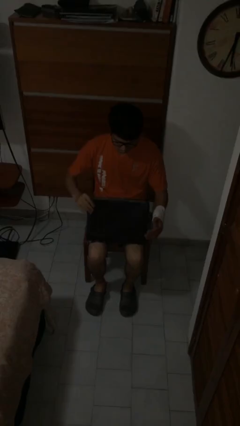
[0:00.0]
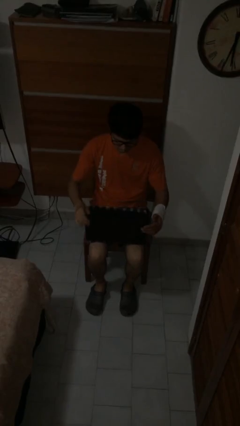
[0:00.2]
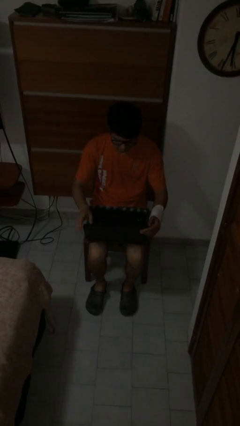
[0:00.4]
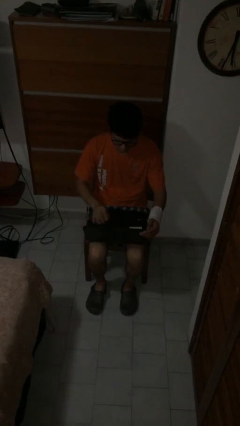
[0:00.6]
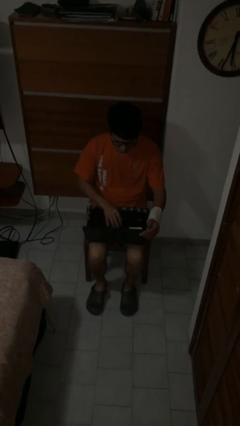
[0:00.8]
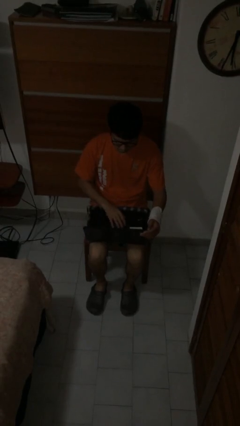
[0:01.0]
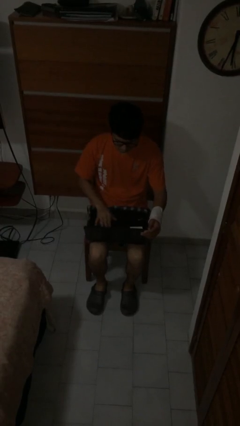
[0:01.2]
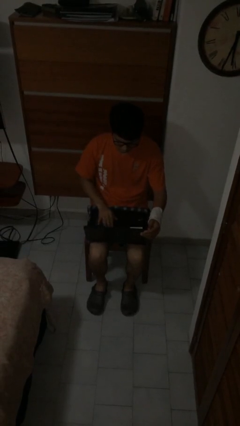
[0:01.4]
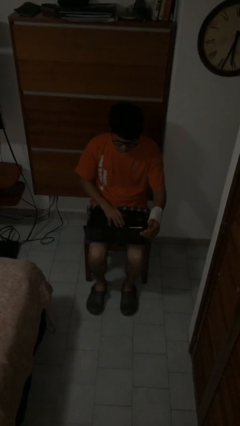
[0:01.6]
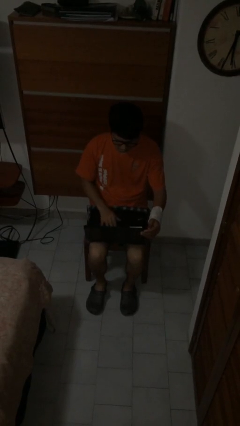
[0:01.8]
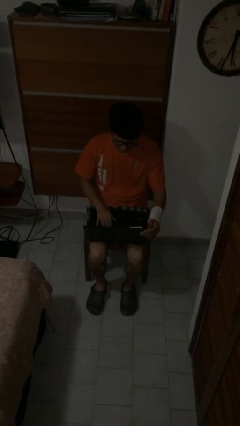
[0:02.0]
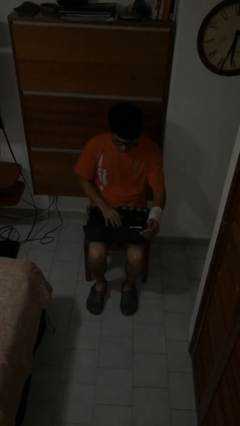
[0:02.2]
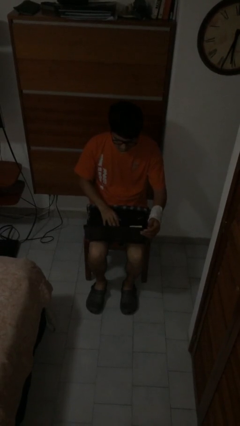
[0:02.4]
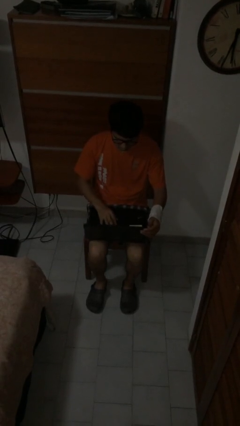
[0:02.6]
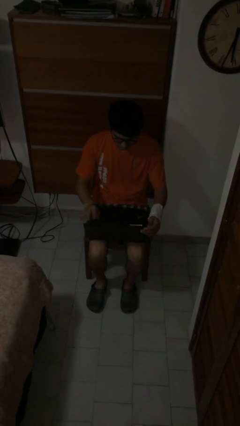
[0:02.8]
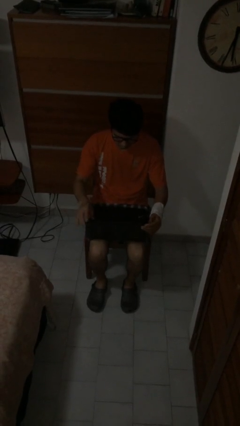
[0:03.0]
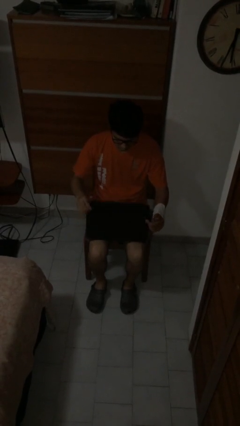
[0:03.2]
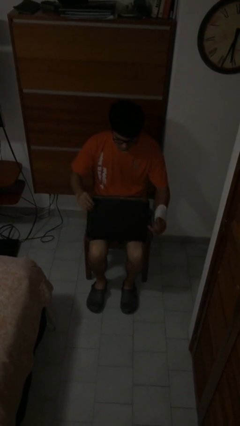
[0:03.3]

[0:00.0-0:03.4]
person interacts with laptop

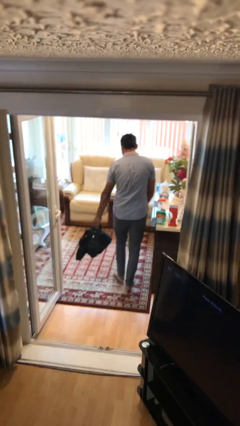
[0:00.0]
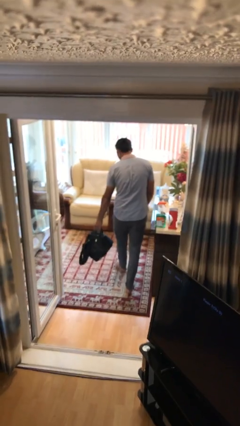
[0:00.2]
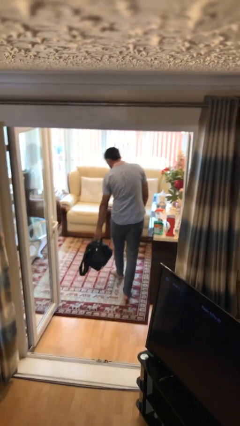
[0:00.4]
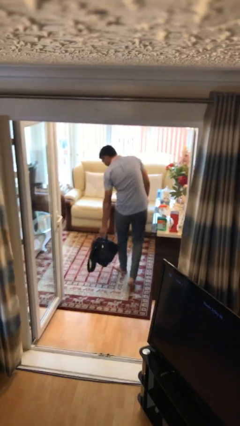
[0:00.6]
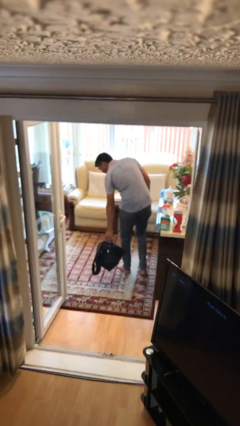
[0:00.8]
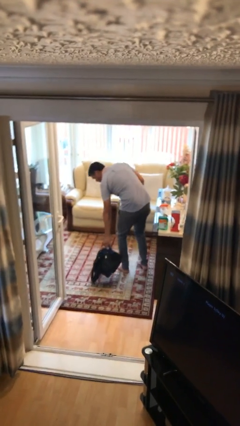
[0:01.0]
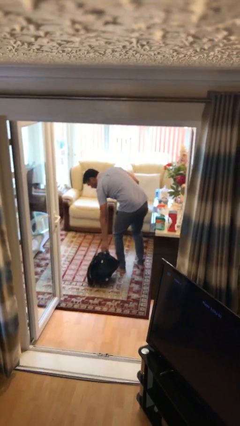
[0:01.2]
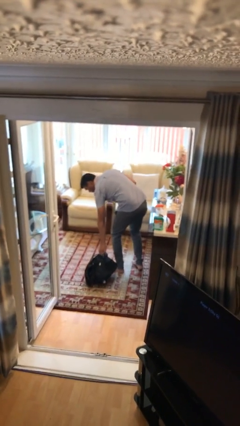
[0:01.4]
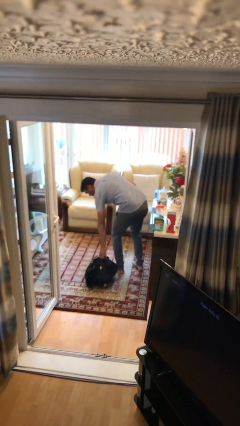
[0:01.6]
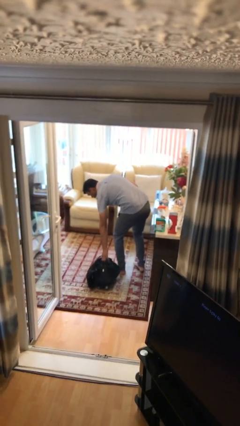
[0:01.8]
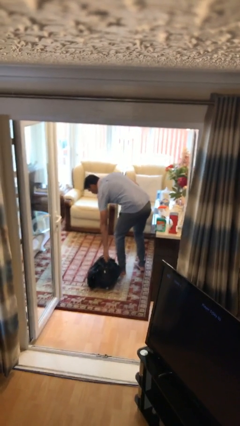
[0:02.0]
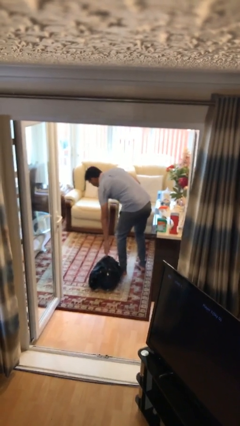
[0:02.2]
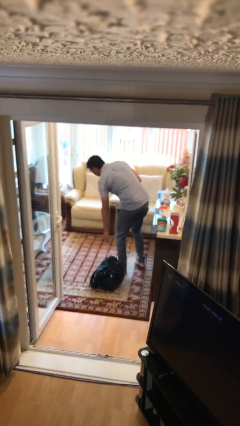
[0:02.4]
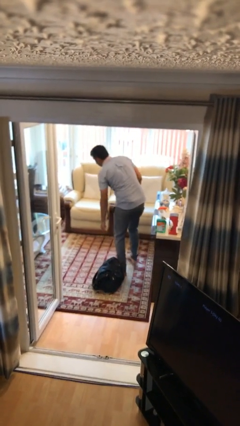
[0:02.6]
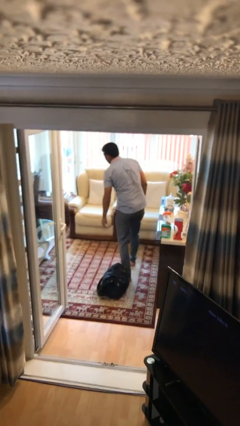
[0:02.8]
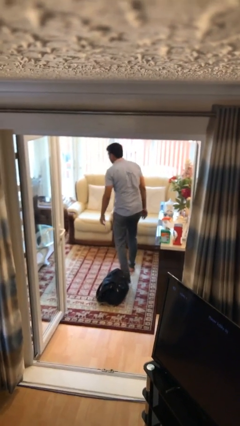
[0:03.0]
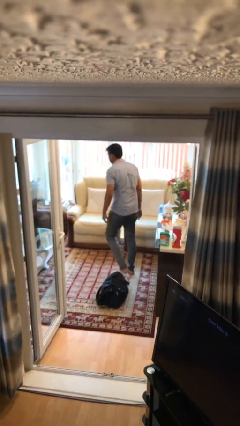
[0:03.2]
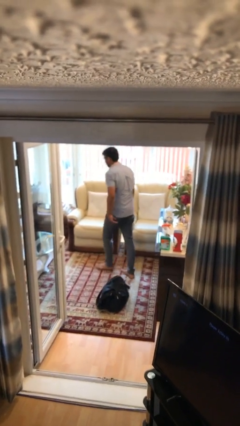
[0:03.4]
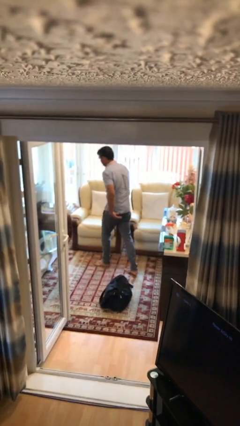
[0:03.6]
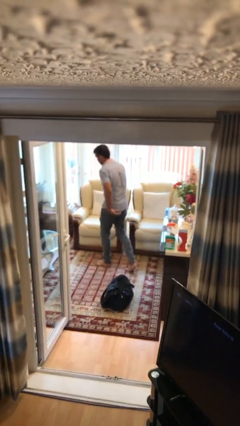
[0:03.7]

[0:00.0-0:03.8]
person puts down object on floor

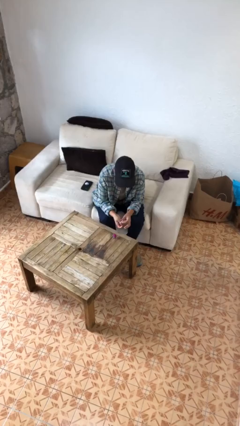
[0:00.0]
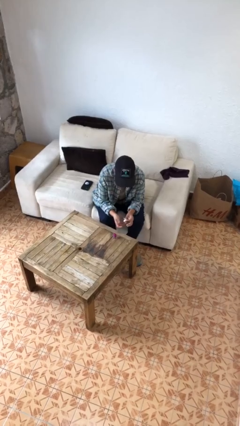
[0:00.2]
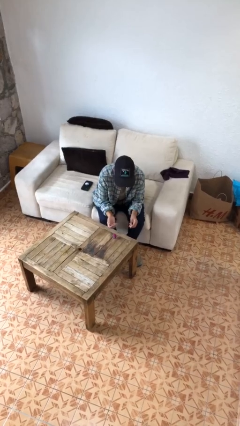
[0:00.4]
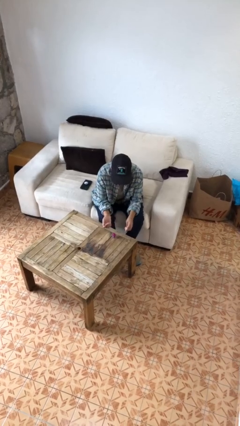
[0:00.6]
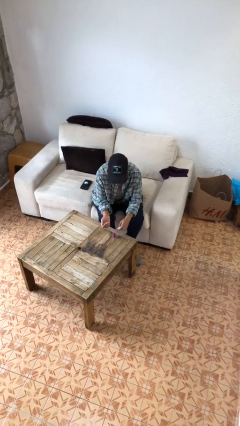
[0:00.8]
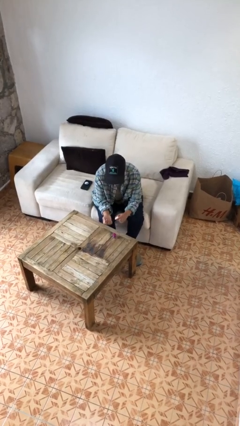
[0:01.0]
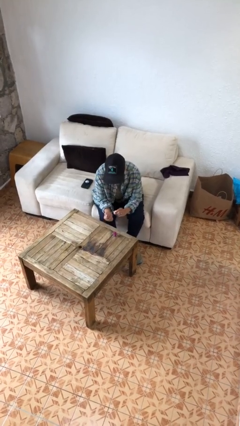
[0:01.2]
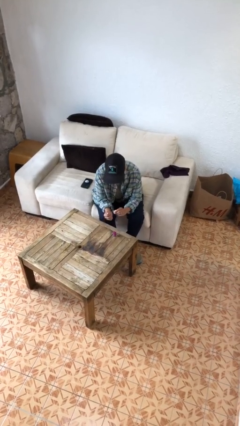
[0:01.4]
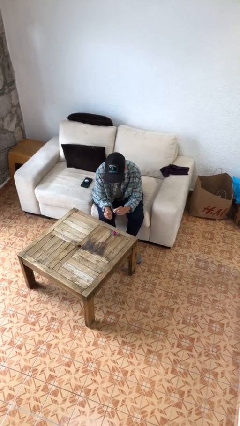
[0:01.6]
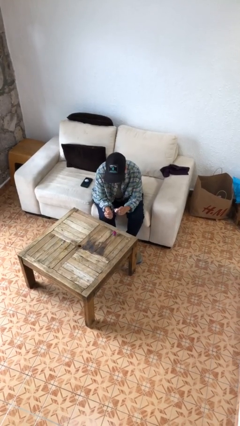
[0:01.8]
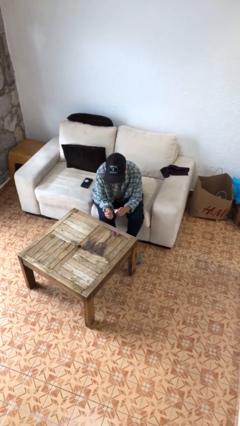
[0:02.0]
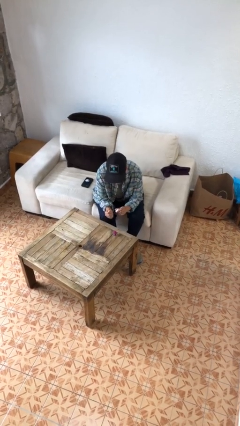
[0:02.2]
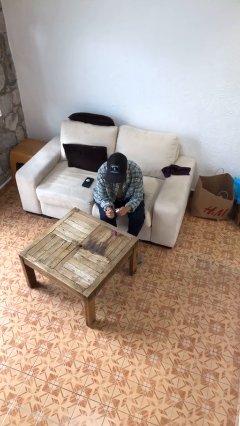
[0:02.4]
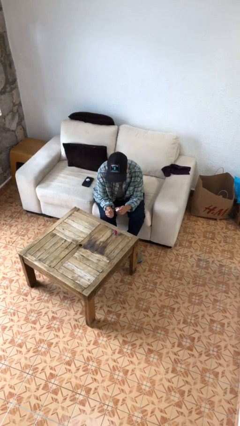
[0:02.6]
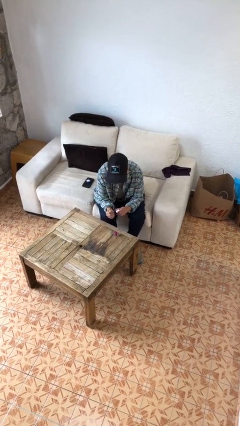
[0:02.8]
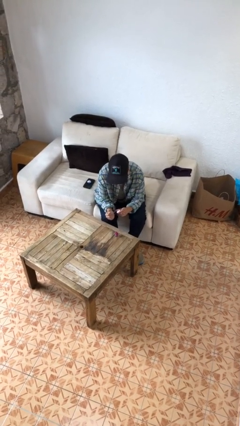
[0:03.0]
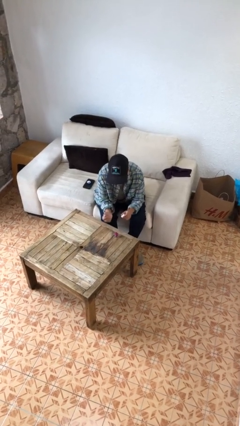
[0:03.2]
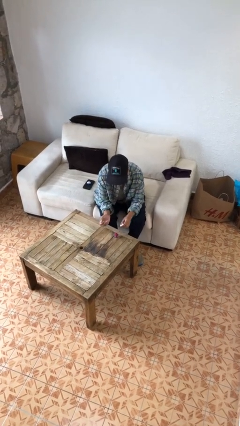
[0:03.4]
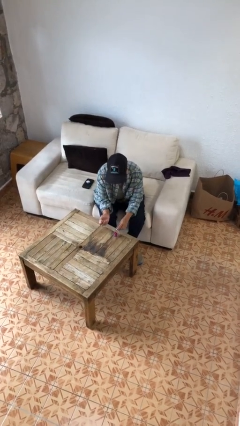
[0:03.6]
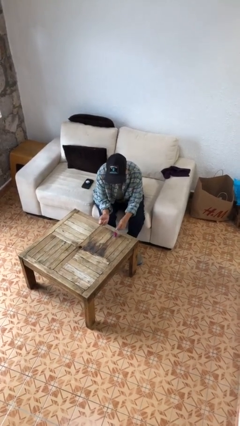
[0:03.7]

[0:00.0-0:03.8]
person paints fingernails

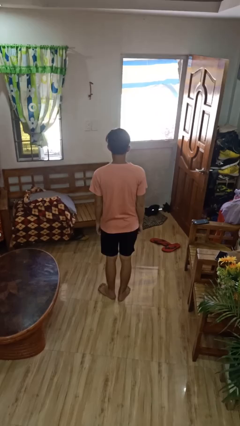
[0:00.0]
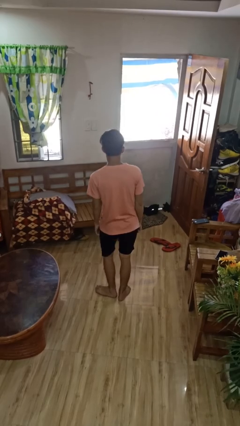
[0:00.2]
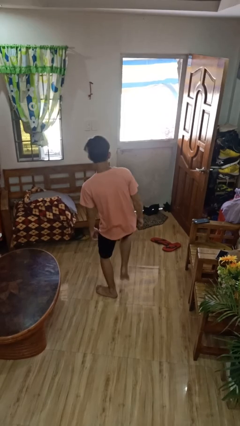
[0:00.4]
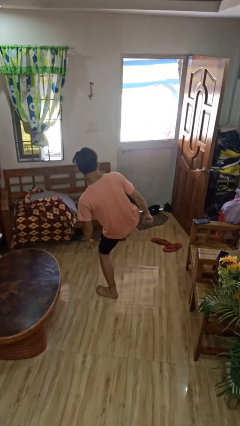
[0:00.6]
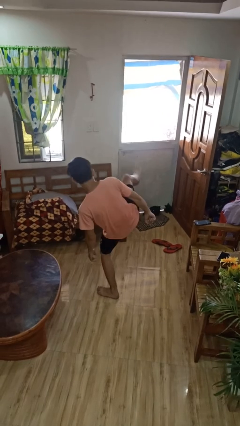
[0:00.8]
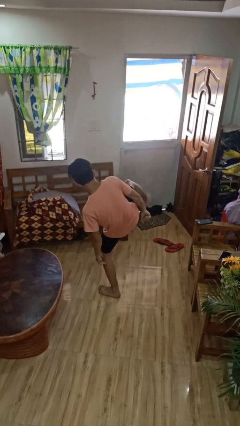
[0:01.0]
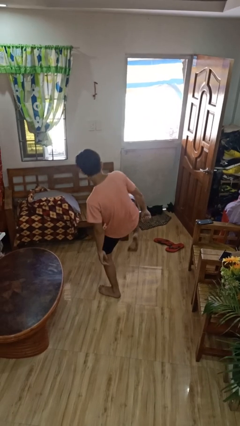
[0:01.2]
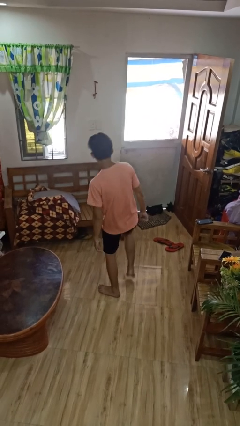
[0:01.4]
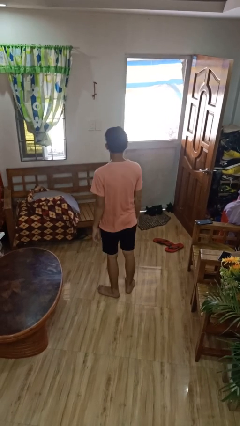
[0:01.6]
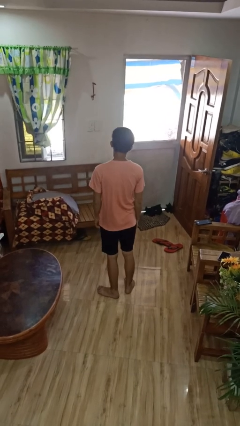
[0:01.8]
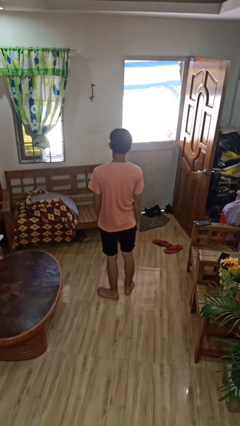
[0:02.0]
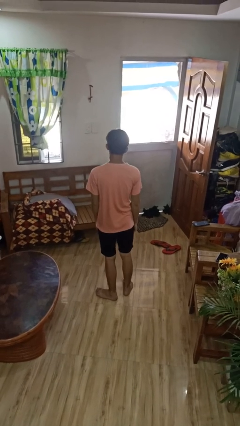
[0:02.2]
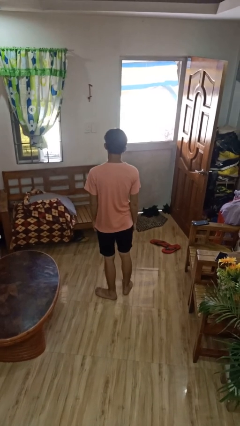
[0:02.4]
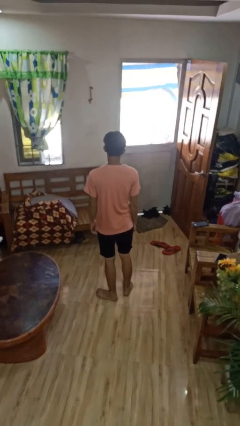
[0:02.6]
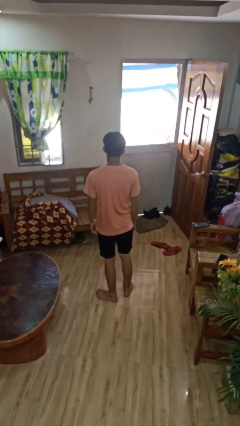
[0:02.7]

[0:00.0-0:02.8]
person karate kicks

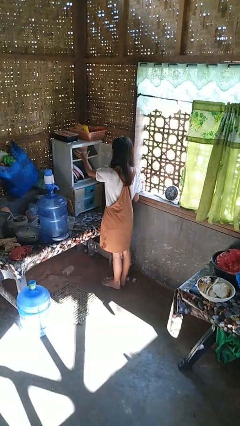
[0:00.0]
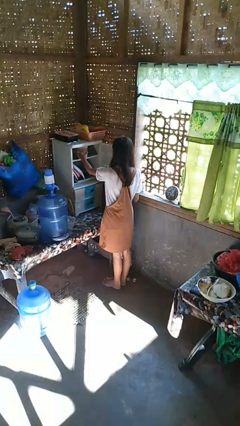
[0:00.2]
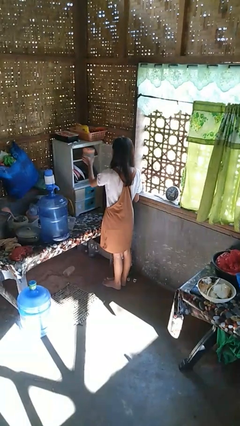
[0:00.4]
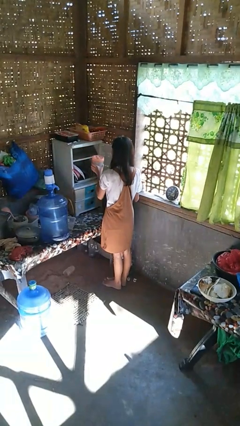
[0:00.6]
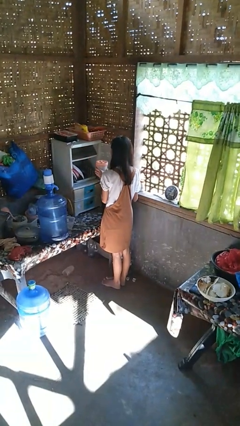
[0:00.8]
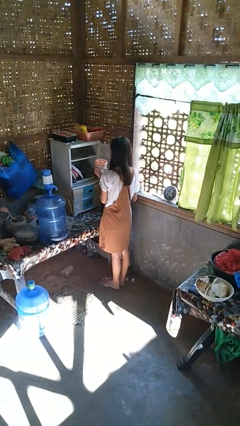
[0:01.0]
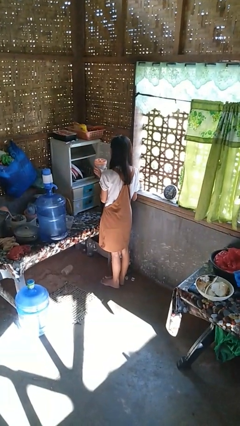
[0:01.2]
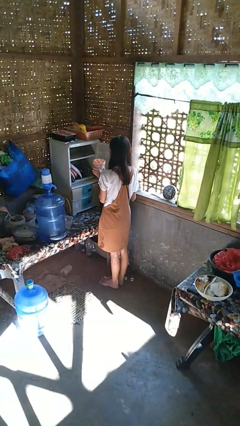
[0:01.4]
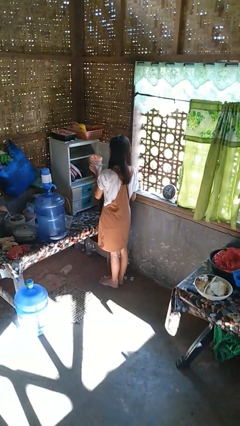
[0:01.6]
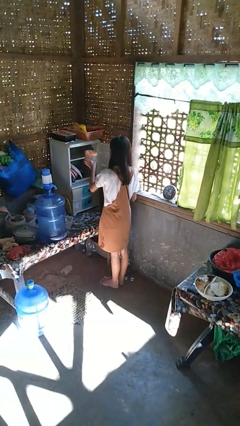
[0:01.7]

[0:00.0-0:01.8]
person picks up object from cabinet

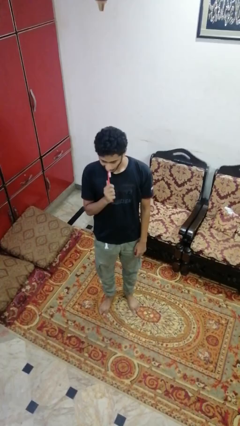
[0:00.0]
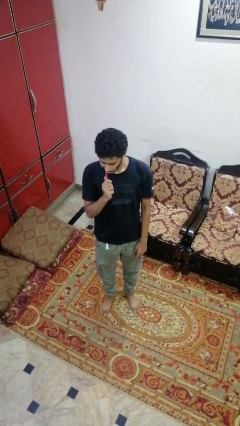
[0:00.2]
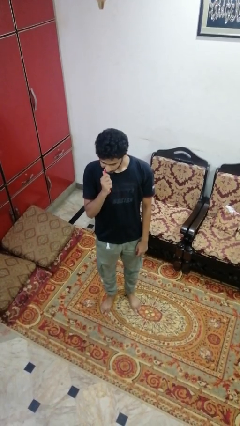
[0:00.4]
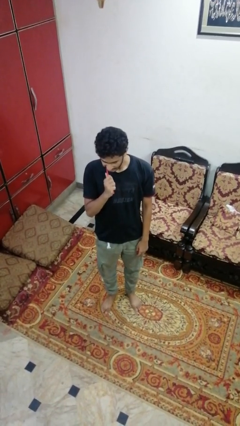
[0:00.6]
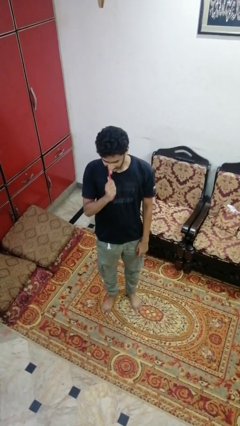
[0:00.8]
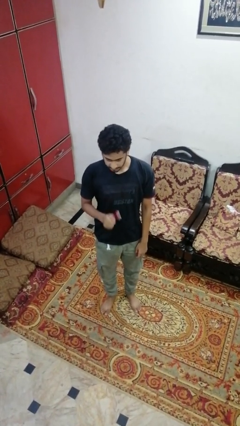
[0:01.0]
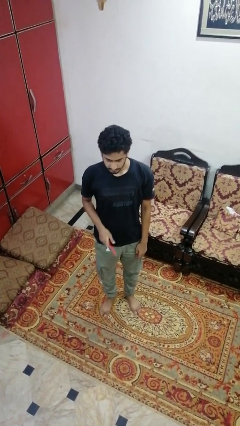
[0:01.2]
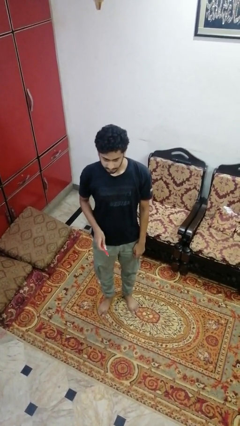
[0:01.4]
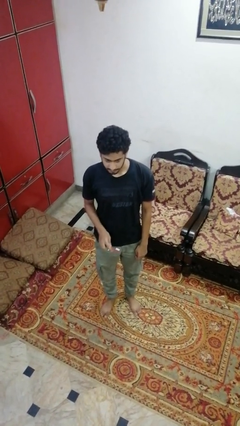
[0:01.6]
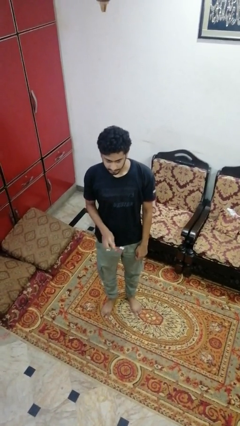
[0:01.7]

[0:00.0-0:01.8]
person brushes teeth
